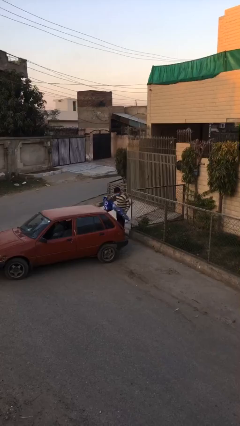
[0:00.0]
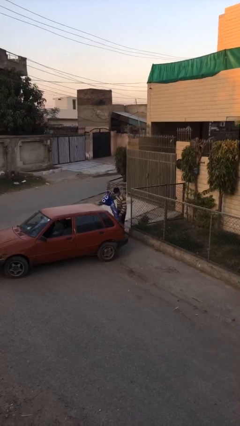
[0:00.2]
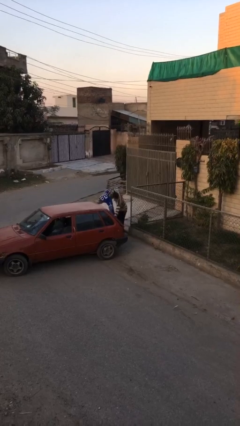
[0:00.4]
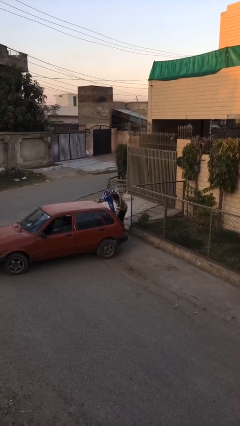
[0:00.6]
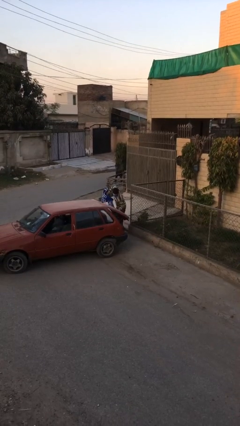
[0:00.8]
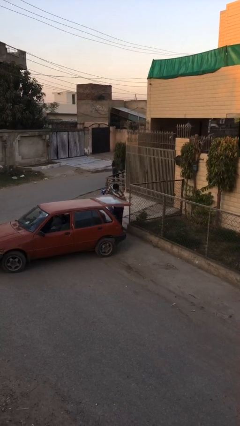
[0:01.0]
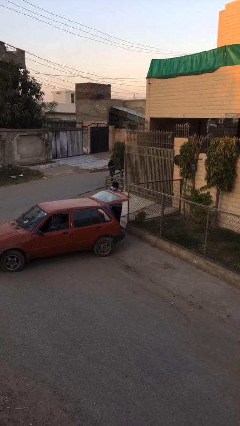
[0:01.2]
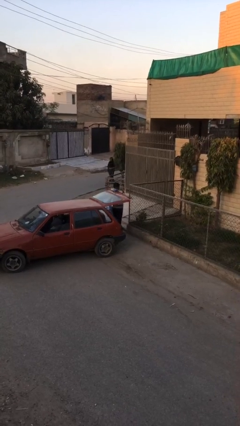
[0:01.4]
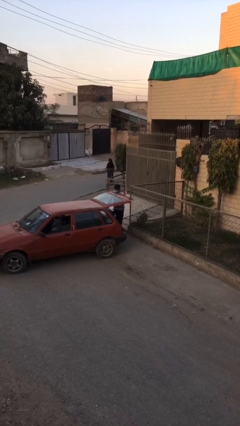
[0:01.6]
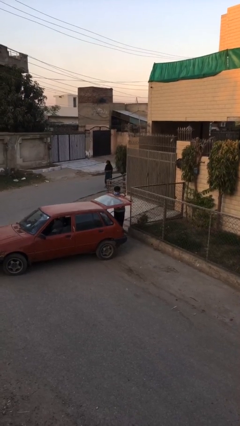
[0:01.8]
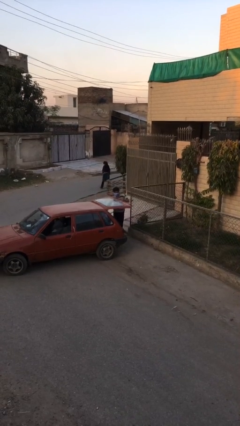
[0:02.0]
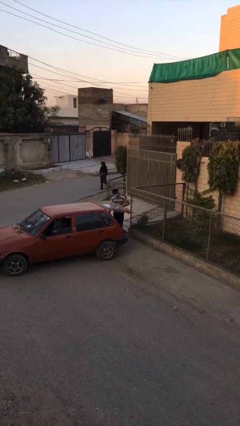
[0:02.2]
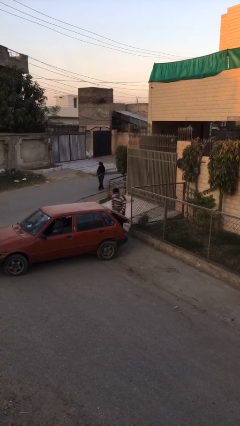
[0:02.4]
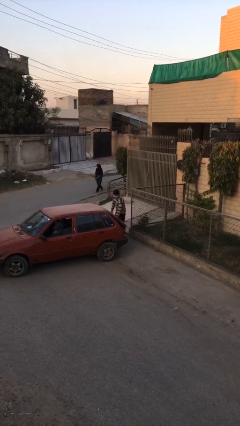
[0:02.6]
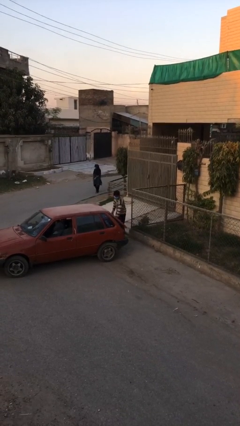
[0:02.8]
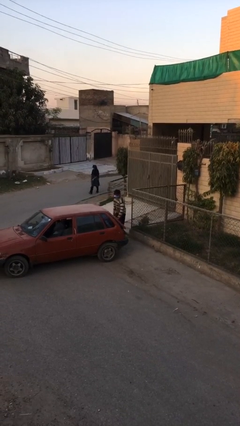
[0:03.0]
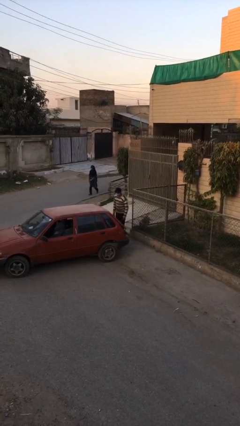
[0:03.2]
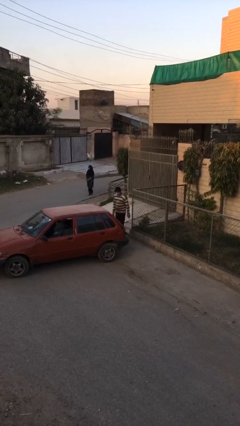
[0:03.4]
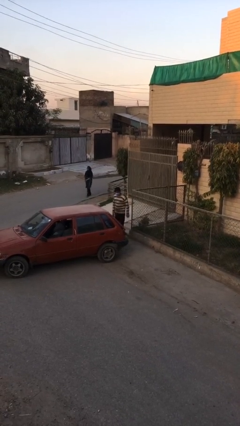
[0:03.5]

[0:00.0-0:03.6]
person loads car

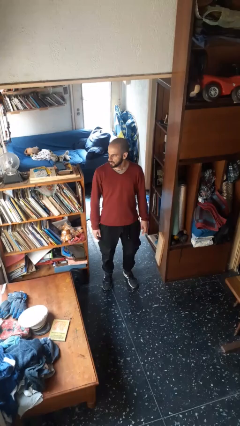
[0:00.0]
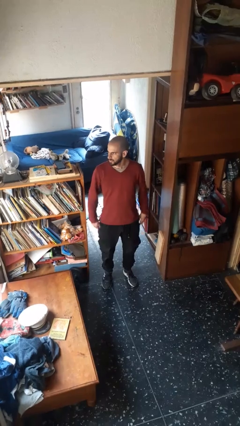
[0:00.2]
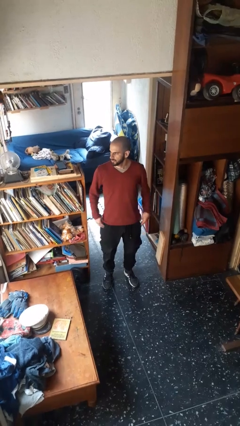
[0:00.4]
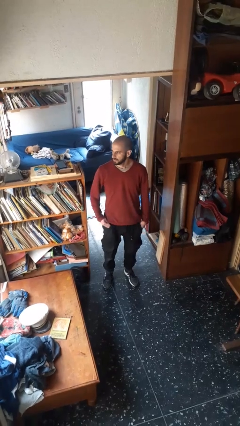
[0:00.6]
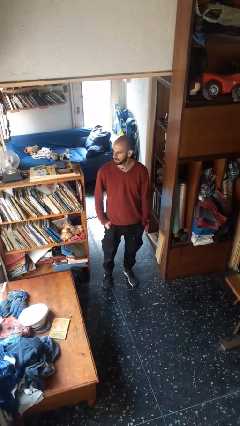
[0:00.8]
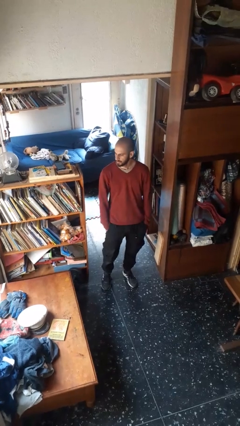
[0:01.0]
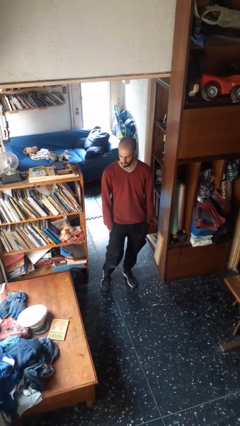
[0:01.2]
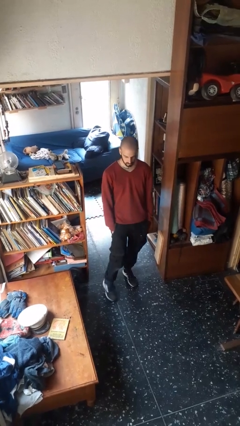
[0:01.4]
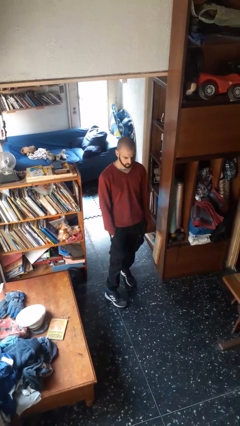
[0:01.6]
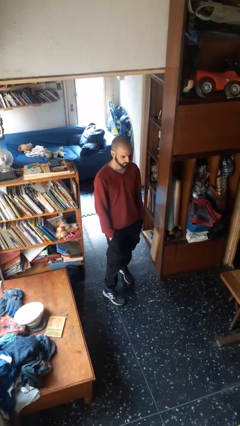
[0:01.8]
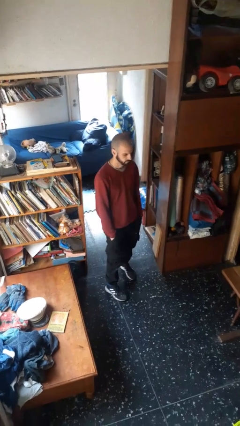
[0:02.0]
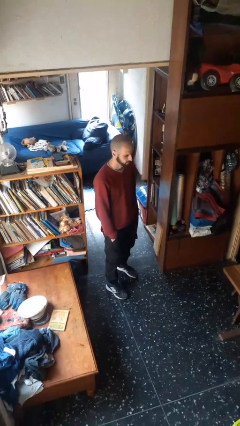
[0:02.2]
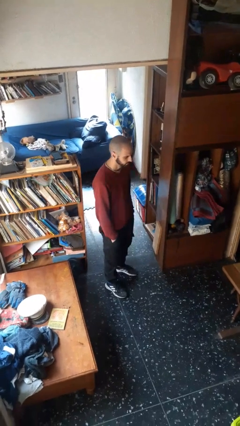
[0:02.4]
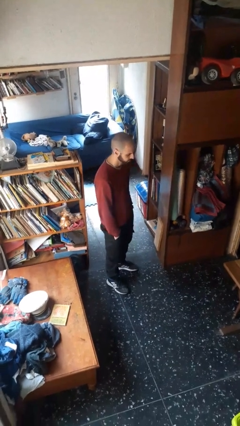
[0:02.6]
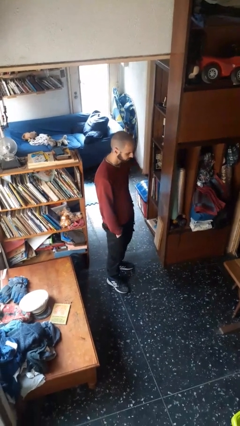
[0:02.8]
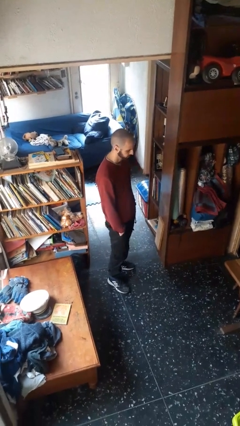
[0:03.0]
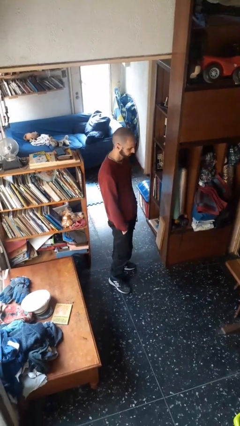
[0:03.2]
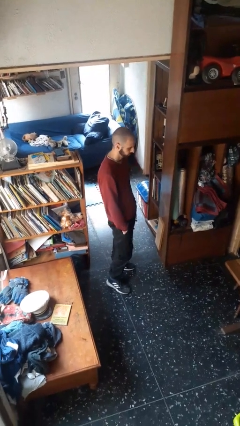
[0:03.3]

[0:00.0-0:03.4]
person puts hands in back pockets

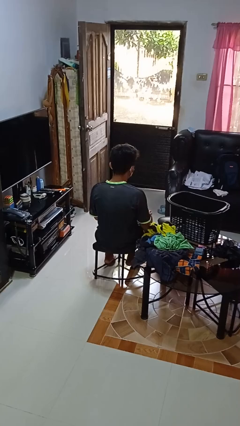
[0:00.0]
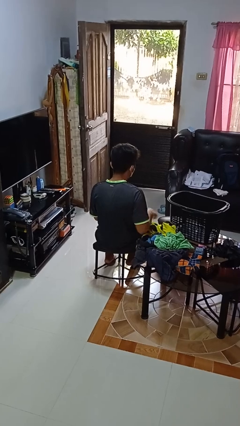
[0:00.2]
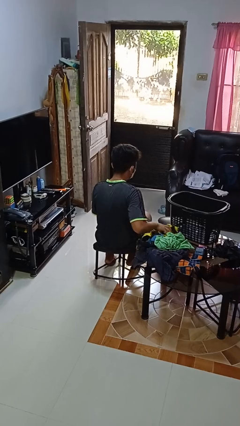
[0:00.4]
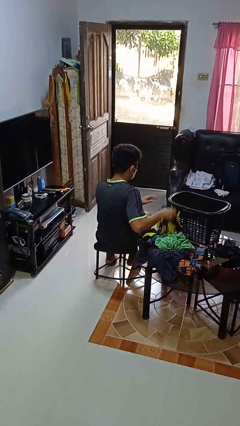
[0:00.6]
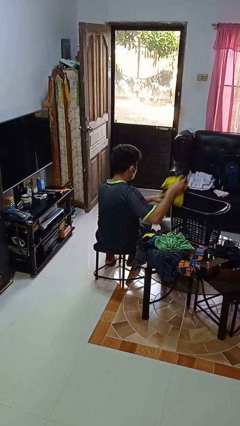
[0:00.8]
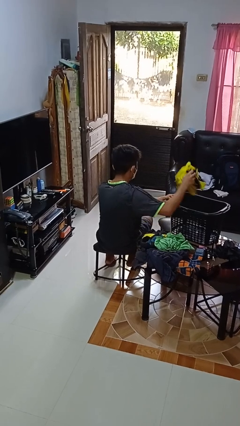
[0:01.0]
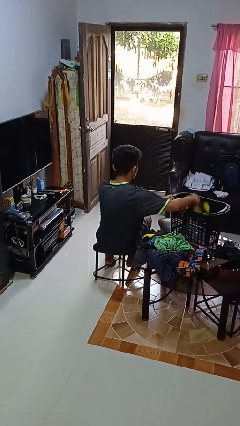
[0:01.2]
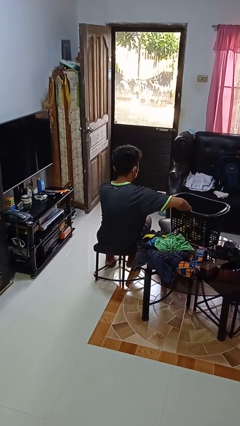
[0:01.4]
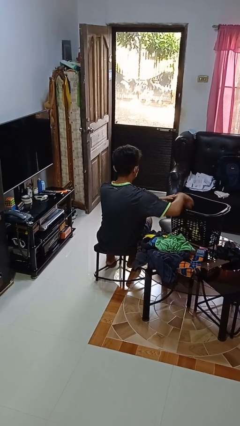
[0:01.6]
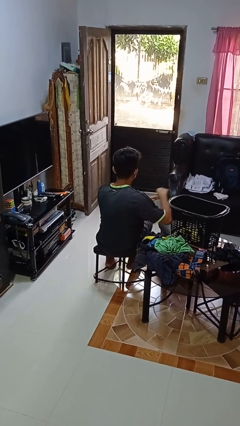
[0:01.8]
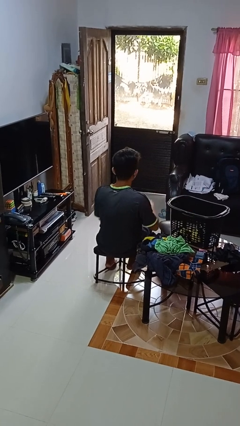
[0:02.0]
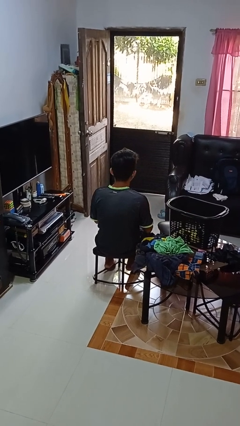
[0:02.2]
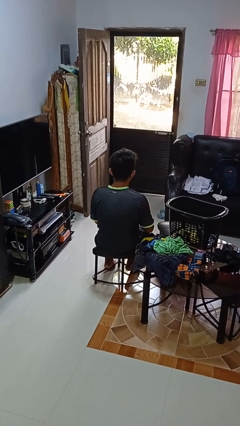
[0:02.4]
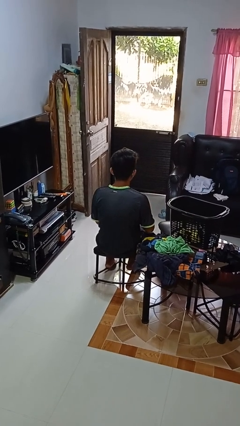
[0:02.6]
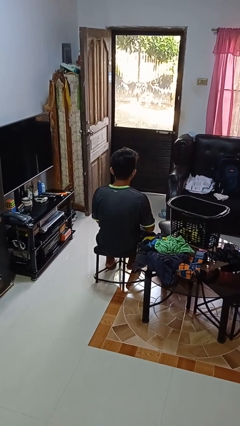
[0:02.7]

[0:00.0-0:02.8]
person puts object into basket

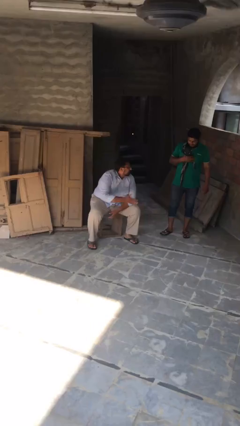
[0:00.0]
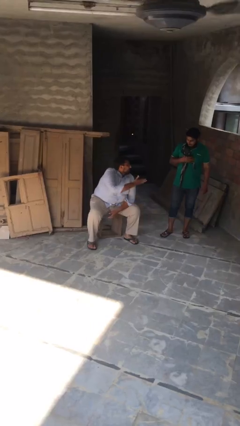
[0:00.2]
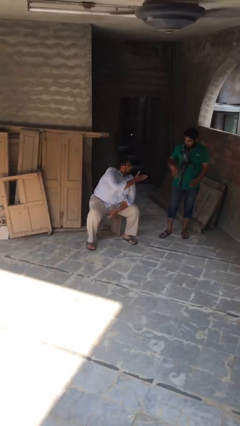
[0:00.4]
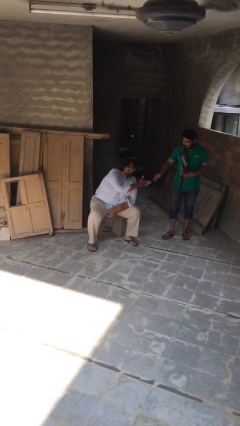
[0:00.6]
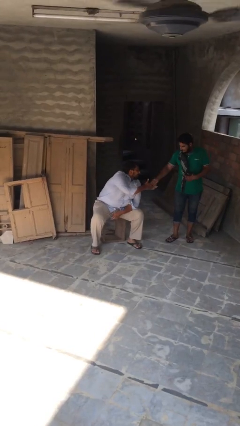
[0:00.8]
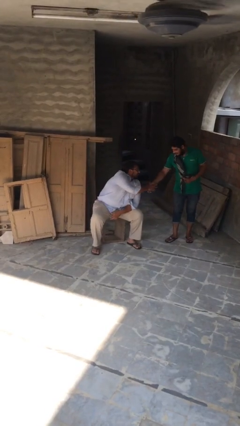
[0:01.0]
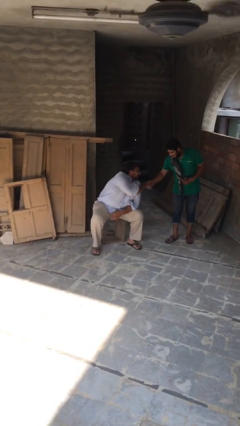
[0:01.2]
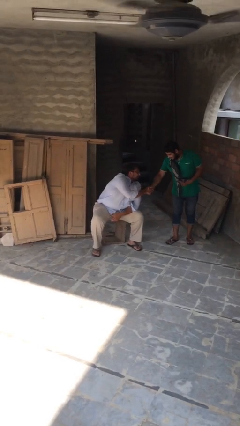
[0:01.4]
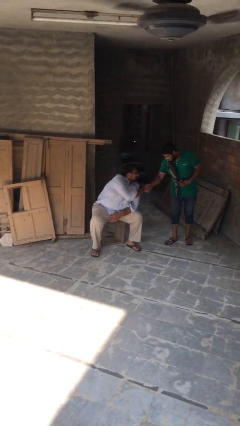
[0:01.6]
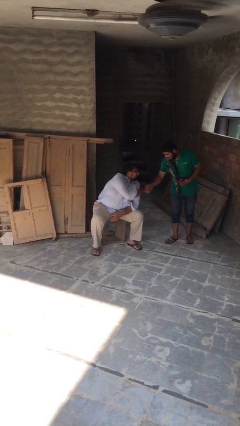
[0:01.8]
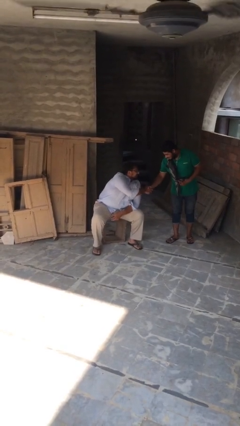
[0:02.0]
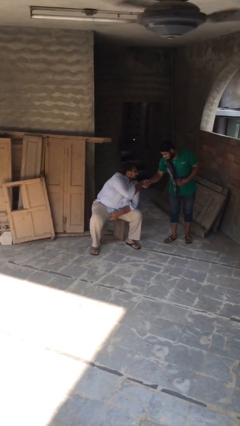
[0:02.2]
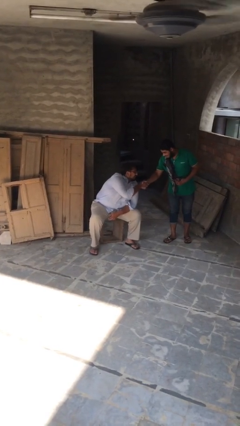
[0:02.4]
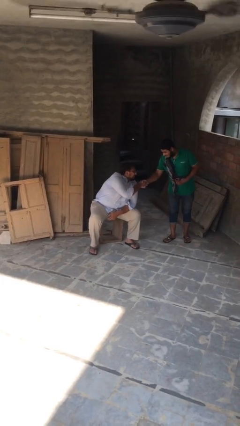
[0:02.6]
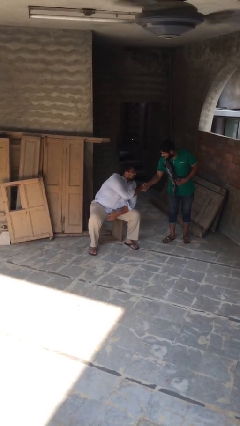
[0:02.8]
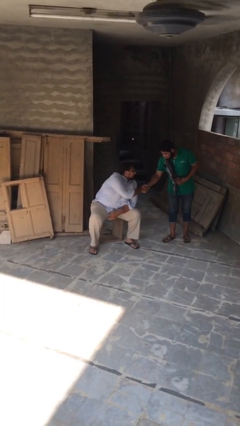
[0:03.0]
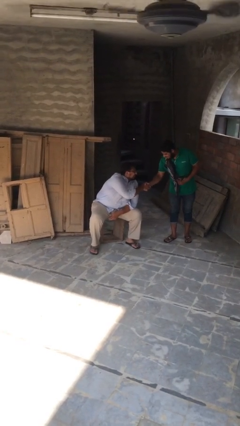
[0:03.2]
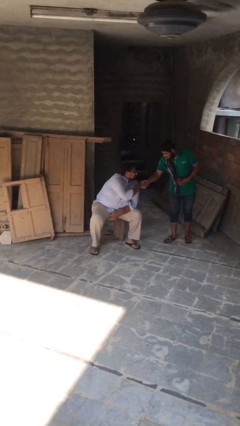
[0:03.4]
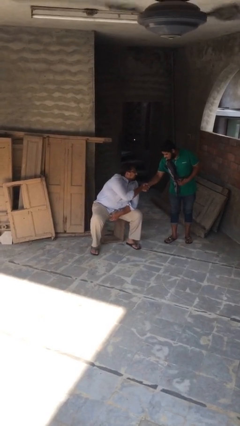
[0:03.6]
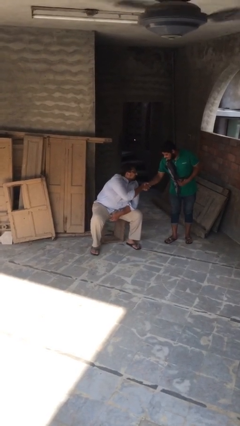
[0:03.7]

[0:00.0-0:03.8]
person shakes hand

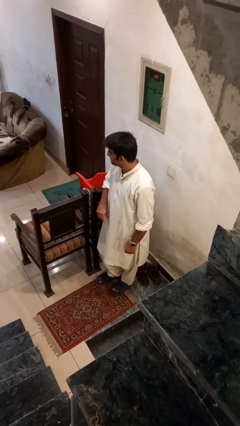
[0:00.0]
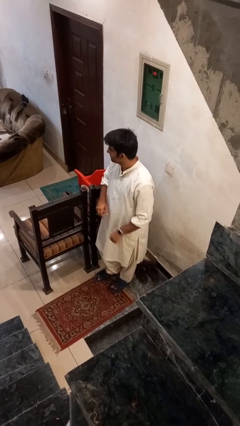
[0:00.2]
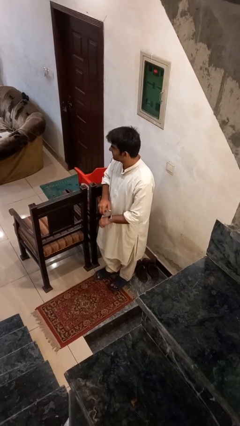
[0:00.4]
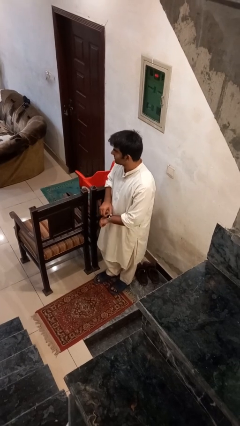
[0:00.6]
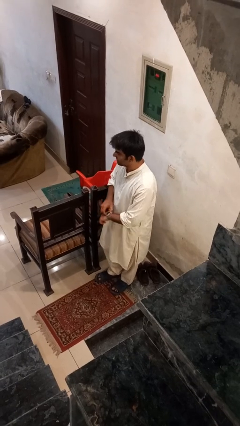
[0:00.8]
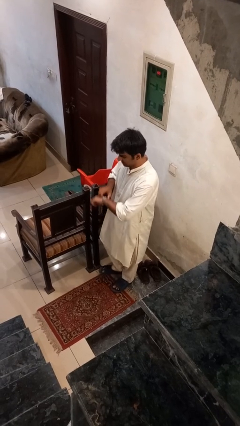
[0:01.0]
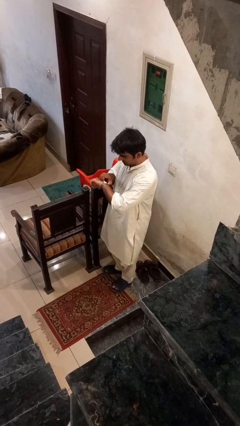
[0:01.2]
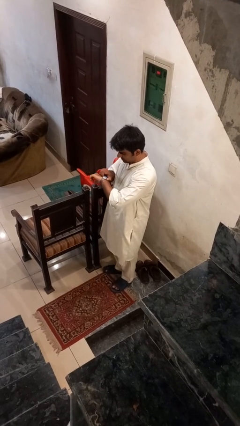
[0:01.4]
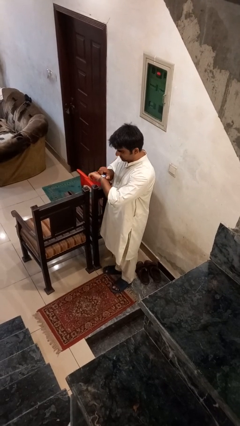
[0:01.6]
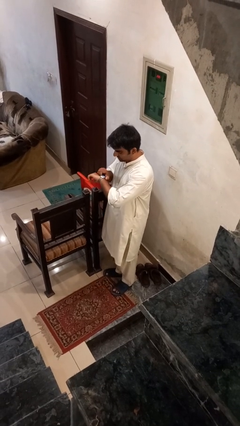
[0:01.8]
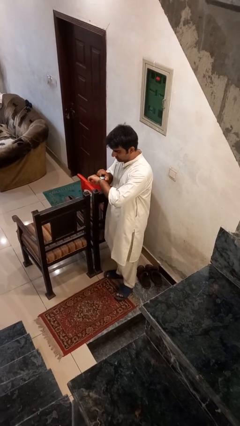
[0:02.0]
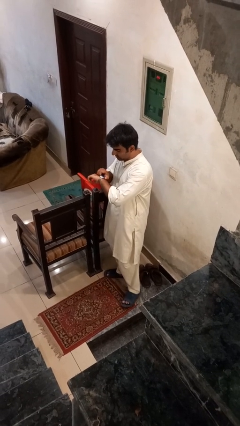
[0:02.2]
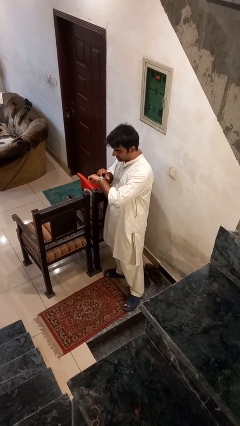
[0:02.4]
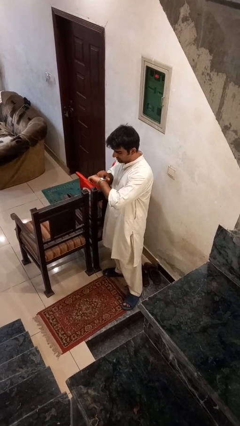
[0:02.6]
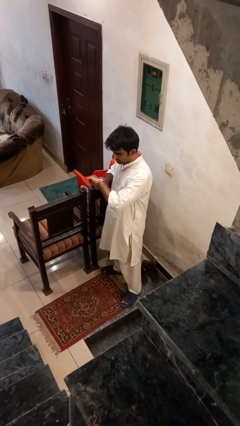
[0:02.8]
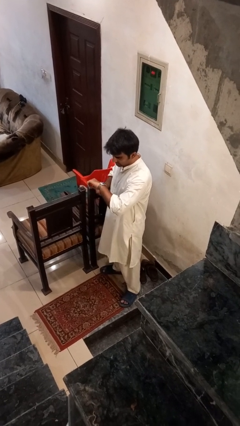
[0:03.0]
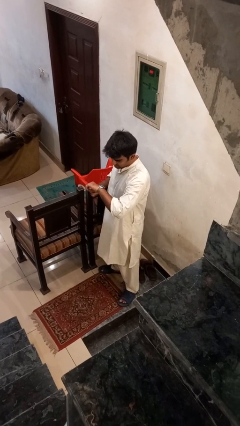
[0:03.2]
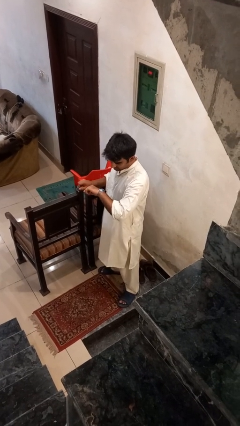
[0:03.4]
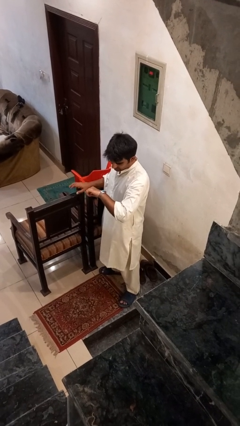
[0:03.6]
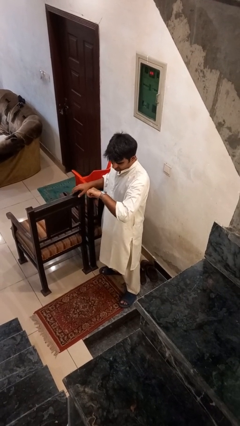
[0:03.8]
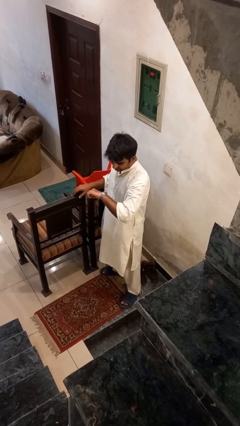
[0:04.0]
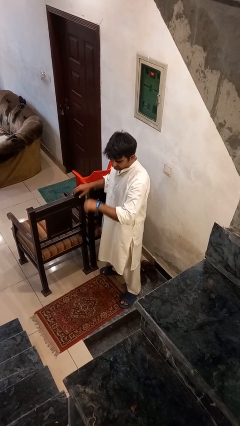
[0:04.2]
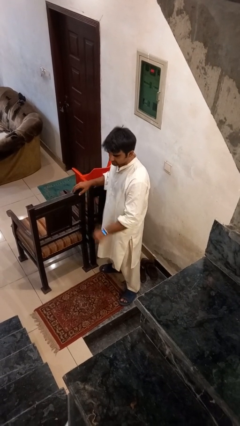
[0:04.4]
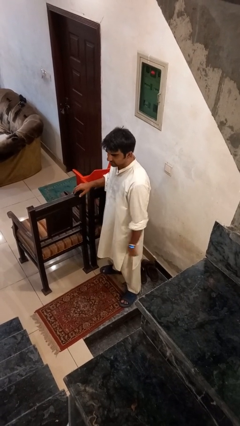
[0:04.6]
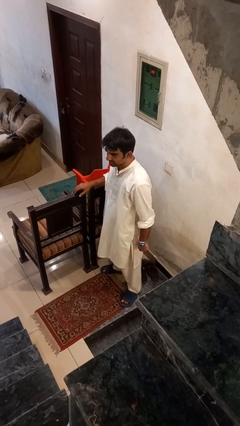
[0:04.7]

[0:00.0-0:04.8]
person looks at wristwatch
